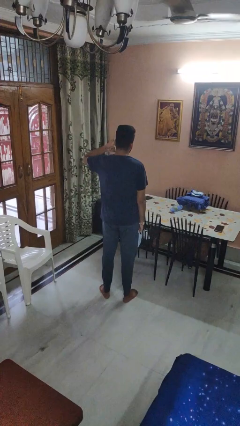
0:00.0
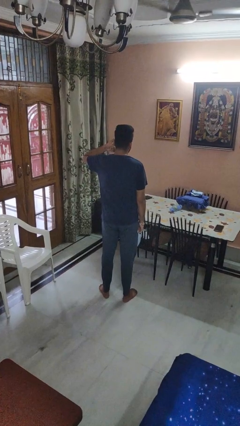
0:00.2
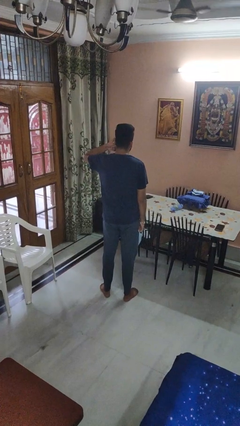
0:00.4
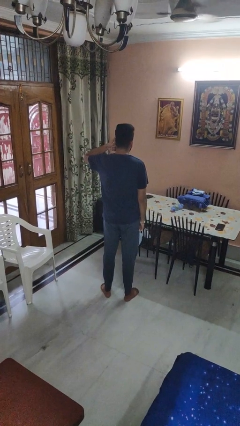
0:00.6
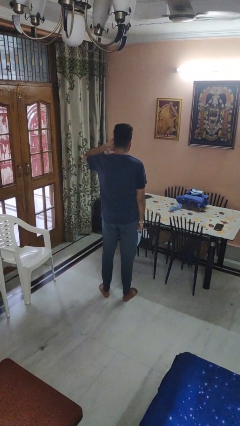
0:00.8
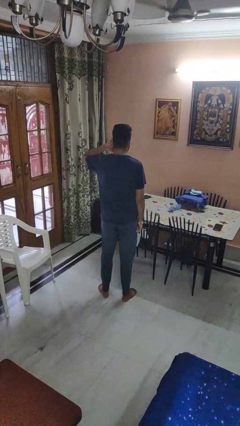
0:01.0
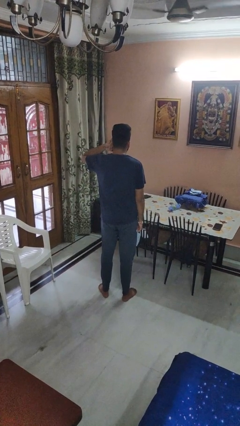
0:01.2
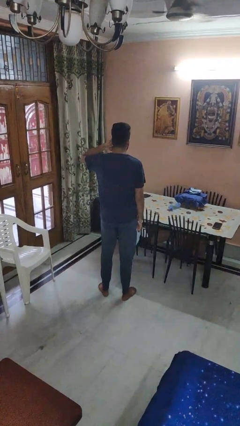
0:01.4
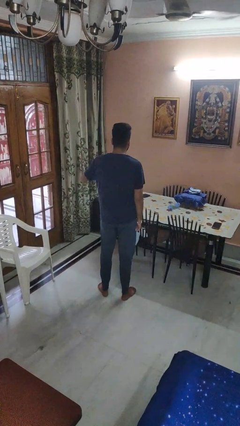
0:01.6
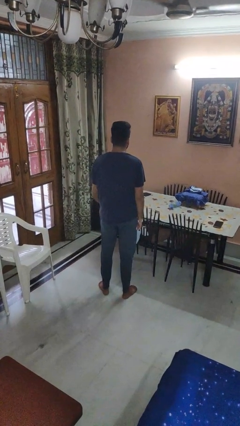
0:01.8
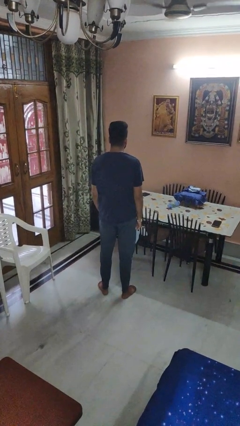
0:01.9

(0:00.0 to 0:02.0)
person gestures call me

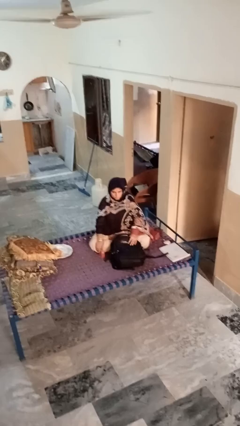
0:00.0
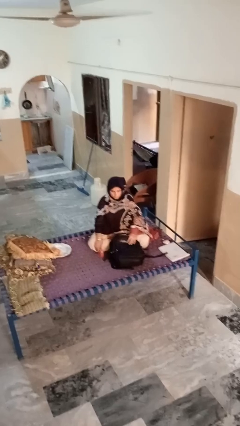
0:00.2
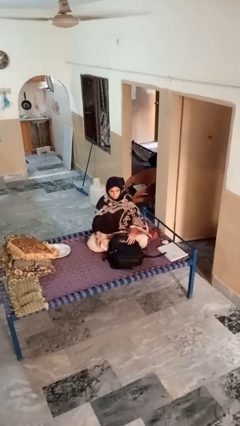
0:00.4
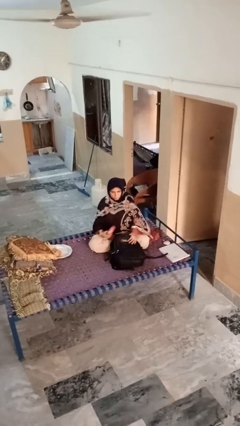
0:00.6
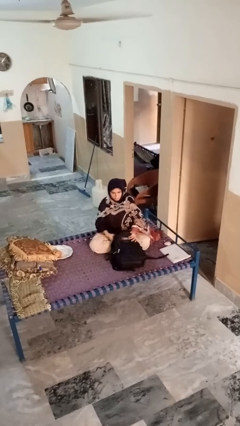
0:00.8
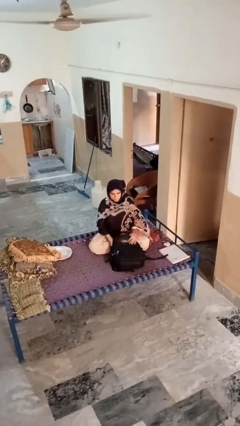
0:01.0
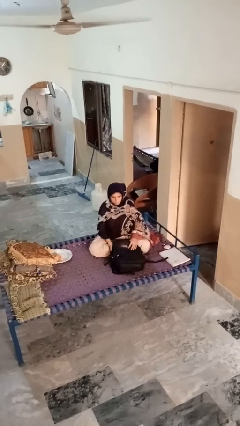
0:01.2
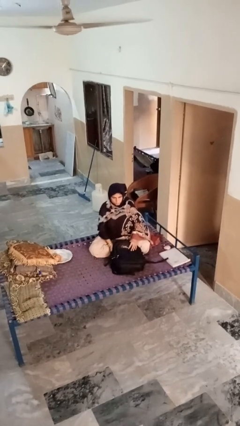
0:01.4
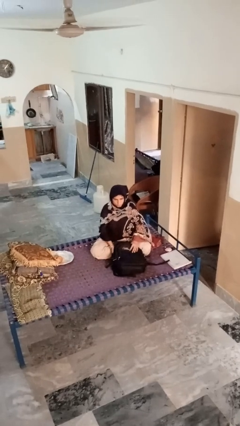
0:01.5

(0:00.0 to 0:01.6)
person puts object into bag

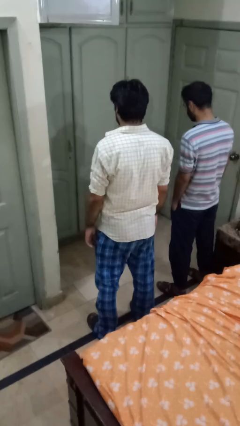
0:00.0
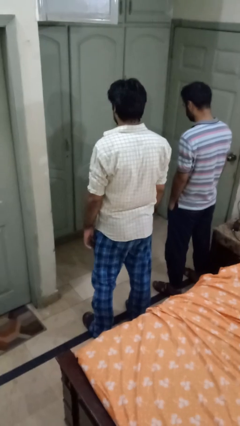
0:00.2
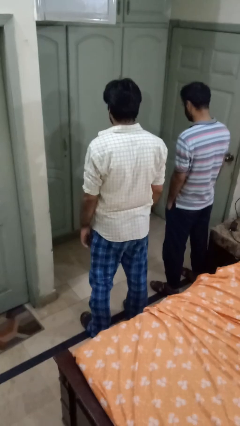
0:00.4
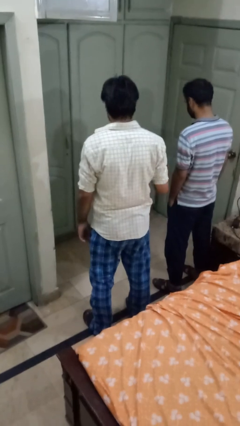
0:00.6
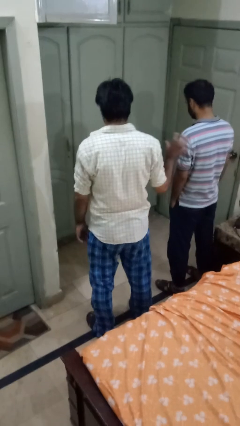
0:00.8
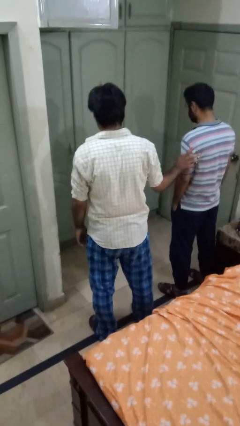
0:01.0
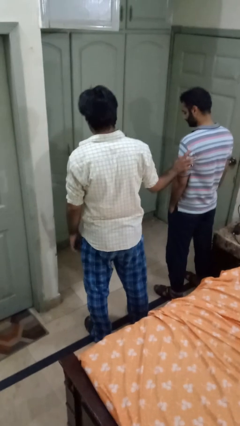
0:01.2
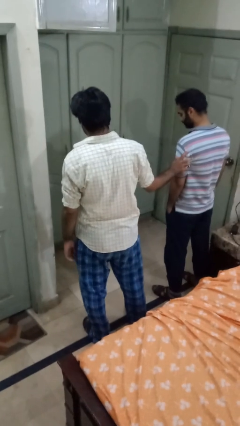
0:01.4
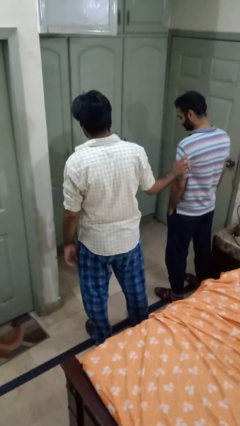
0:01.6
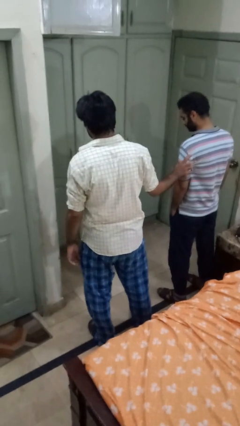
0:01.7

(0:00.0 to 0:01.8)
person grabs person by bicep

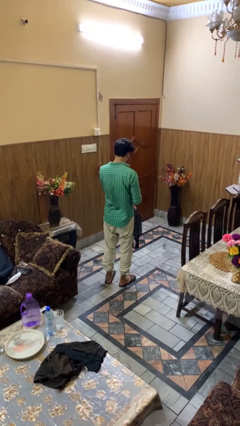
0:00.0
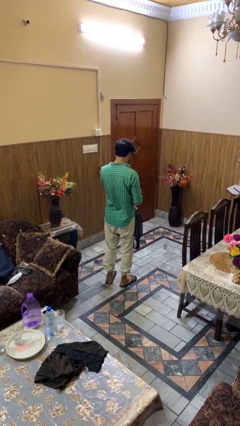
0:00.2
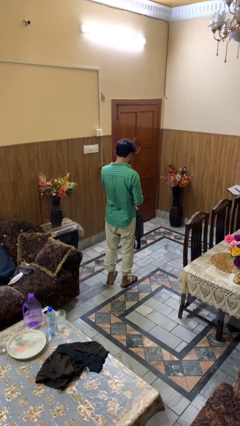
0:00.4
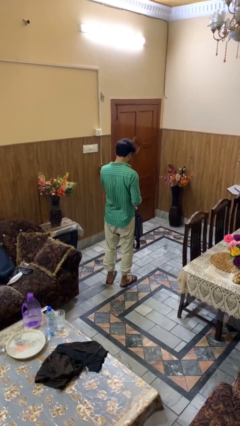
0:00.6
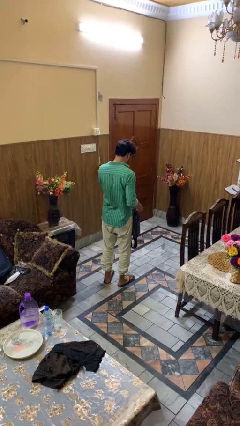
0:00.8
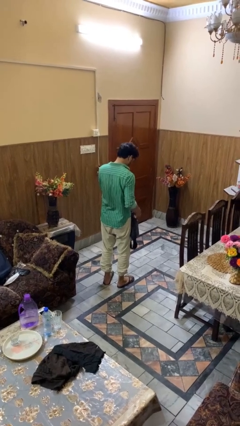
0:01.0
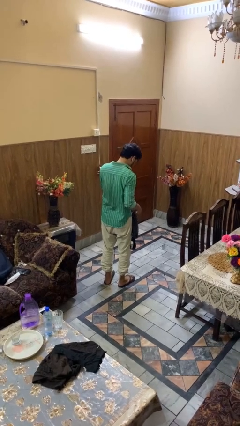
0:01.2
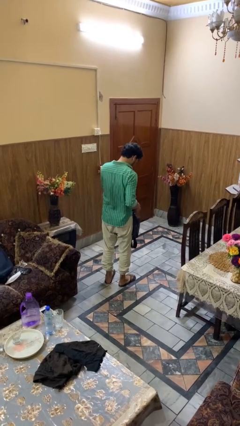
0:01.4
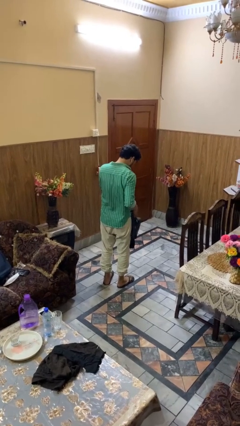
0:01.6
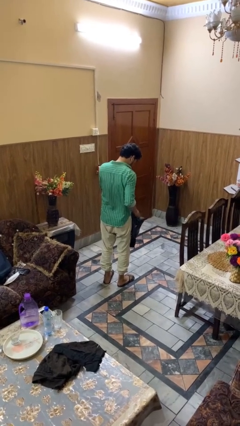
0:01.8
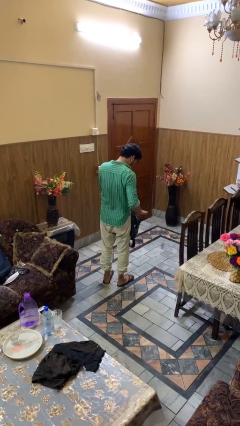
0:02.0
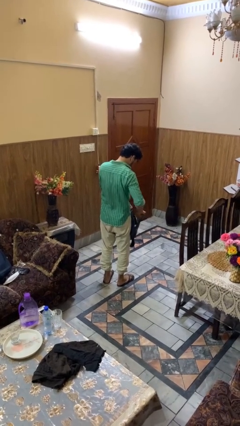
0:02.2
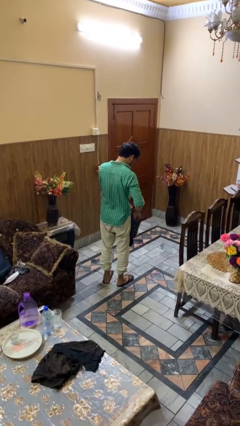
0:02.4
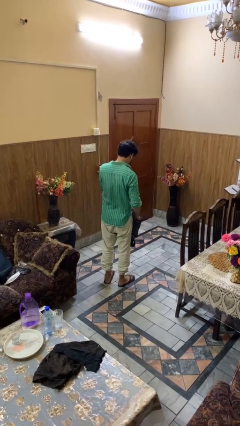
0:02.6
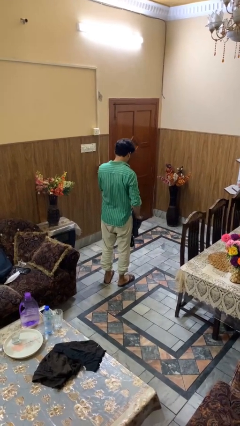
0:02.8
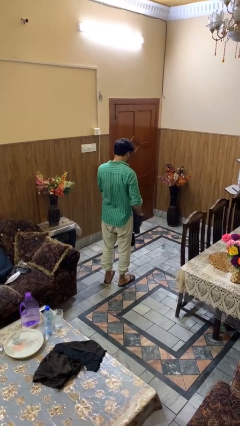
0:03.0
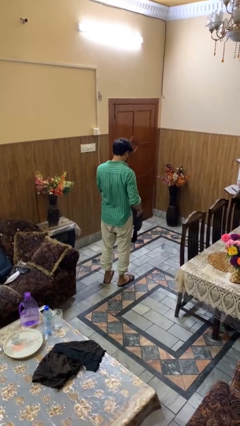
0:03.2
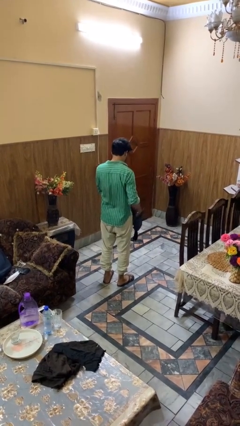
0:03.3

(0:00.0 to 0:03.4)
person searches in purse

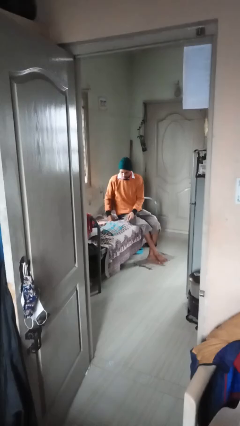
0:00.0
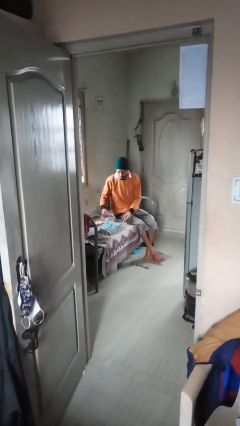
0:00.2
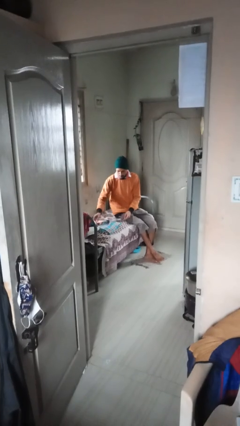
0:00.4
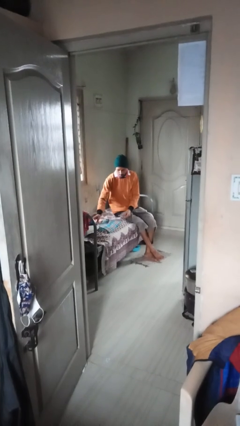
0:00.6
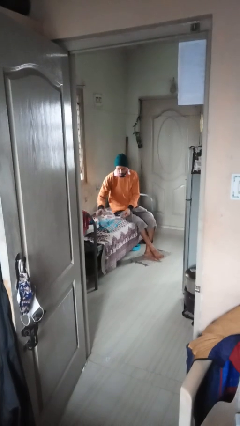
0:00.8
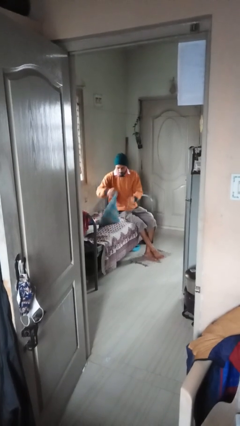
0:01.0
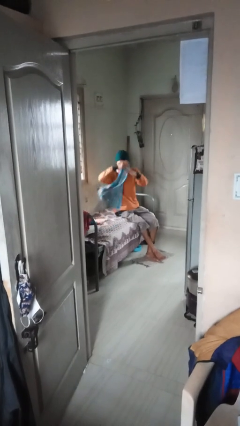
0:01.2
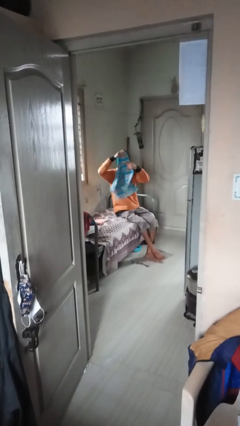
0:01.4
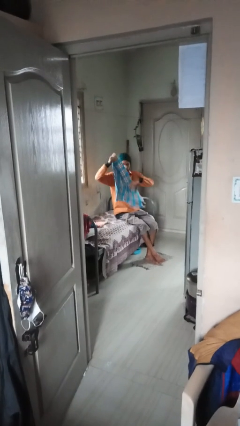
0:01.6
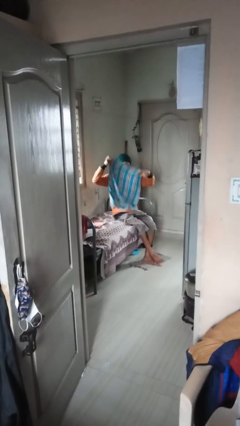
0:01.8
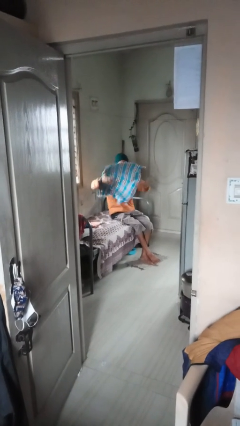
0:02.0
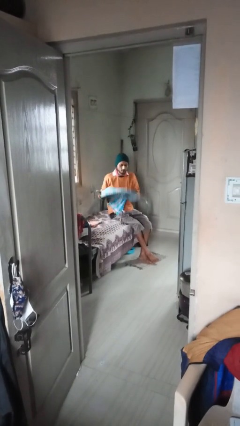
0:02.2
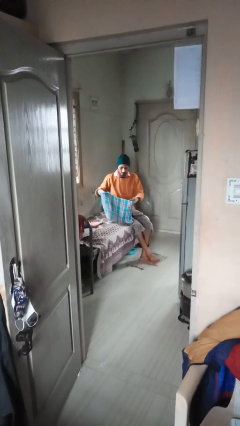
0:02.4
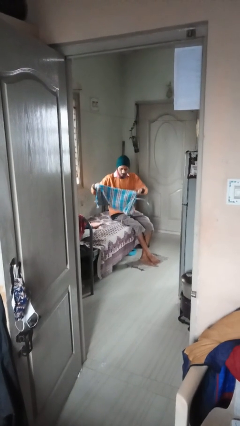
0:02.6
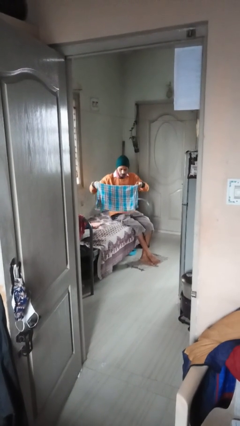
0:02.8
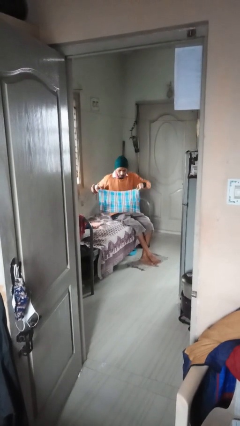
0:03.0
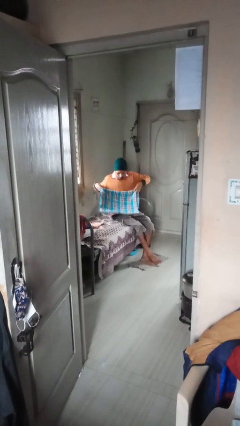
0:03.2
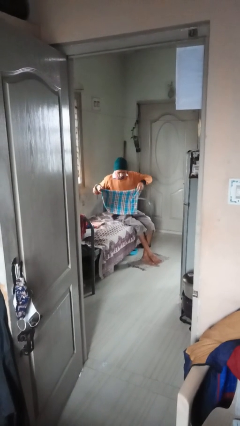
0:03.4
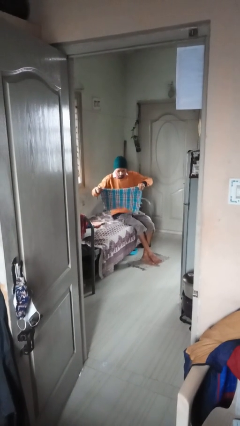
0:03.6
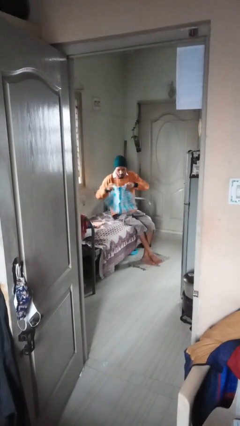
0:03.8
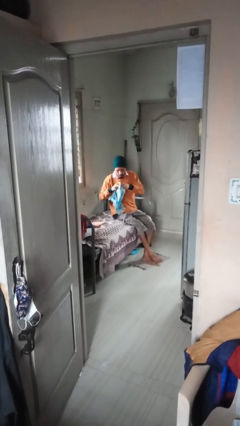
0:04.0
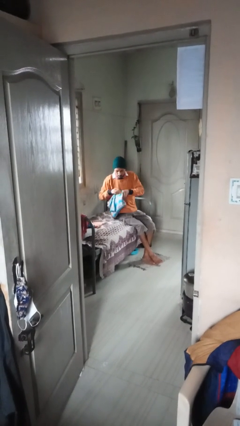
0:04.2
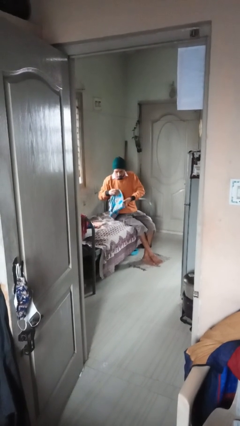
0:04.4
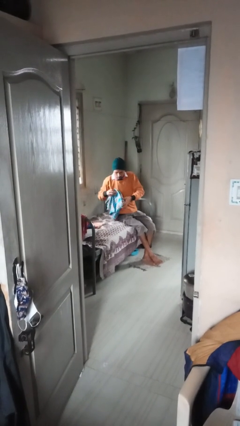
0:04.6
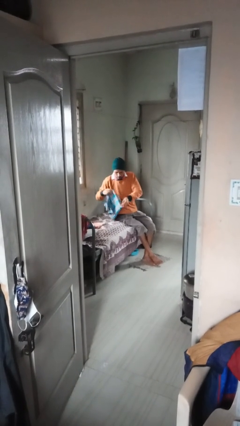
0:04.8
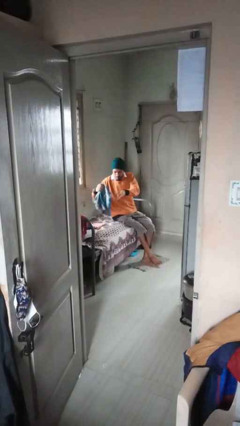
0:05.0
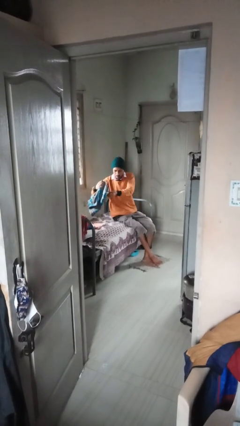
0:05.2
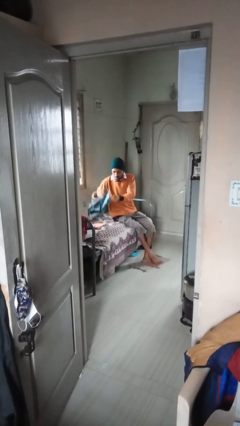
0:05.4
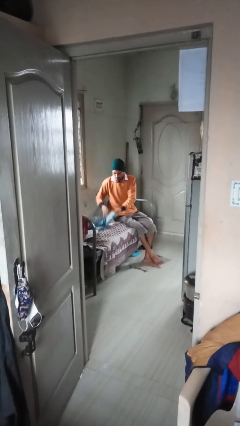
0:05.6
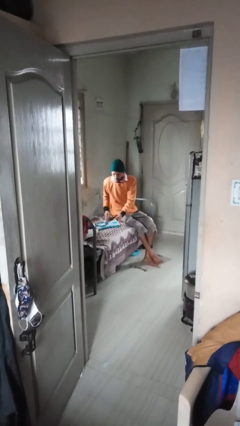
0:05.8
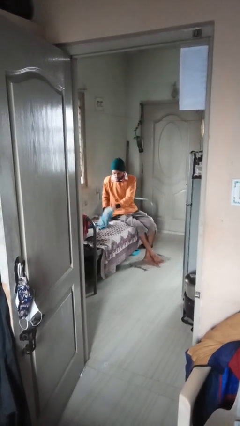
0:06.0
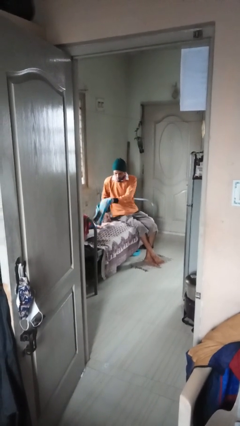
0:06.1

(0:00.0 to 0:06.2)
person folds towel

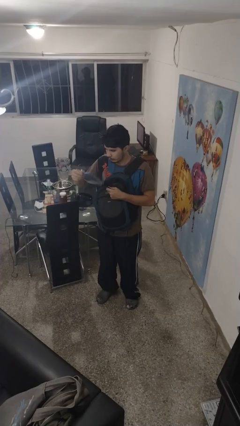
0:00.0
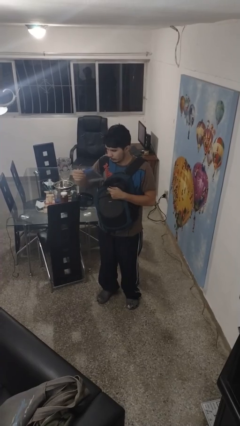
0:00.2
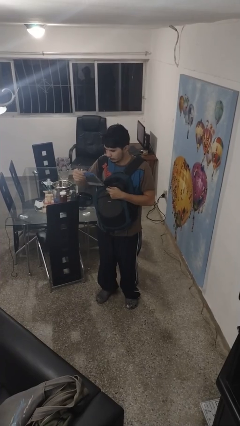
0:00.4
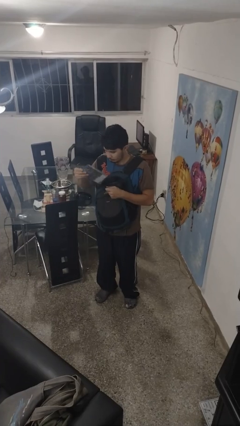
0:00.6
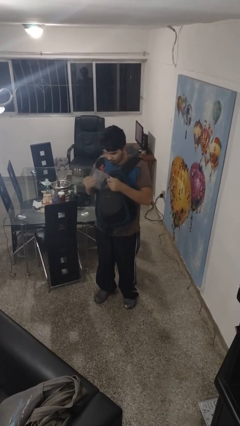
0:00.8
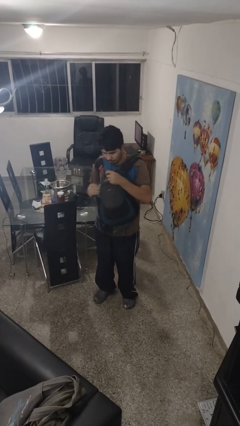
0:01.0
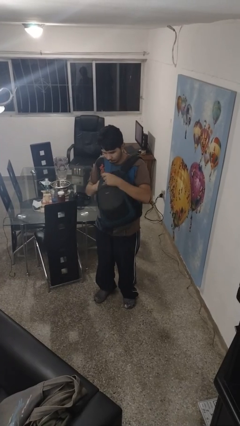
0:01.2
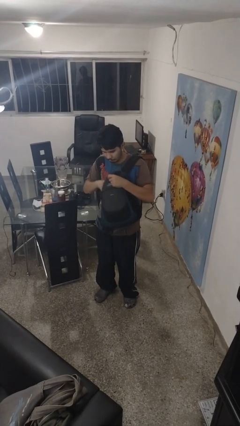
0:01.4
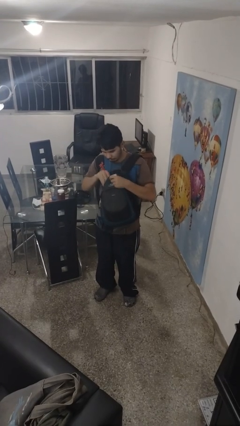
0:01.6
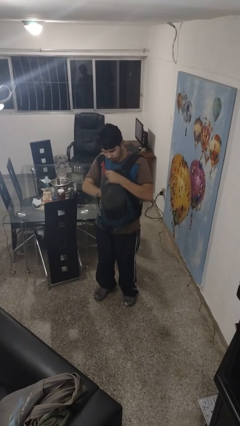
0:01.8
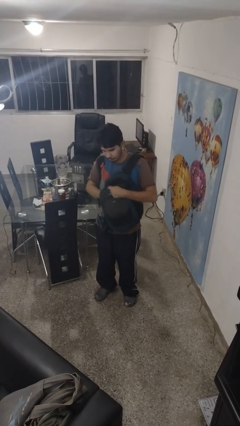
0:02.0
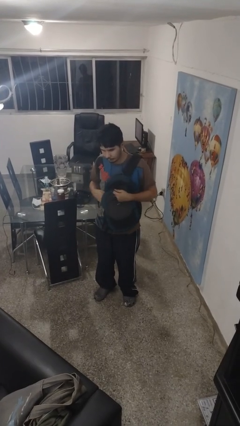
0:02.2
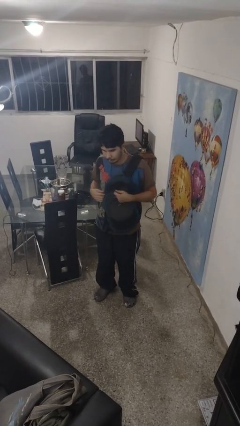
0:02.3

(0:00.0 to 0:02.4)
person puts object into backpack
